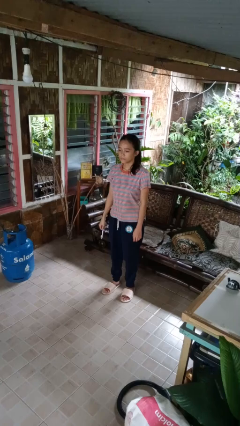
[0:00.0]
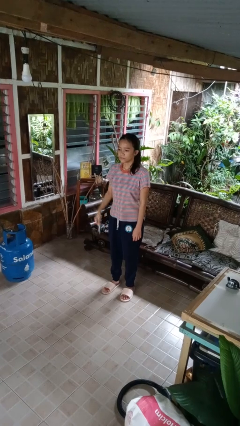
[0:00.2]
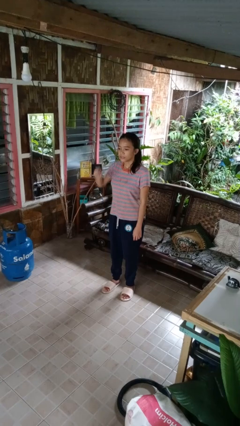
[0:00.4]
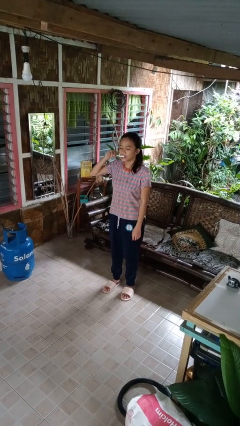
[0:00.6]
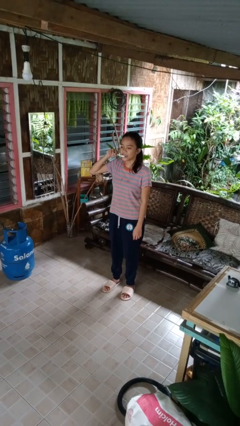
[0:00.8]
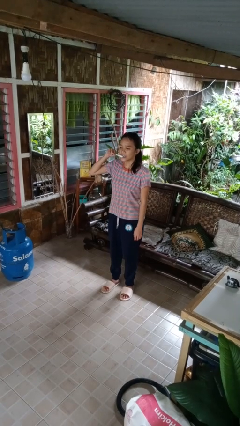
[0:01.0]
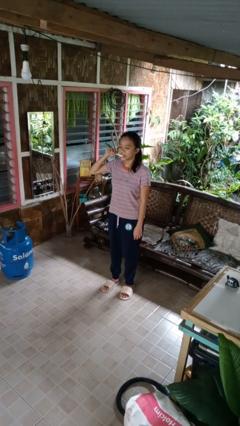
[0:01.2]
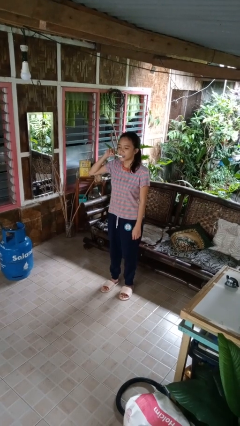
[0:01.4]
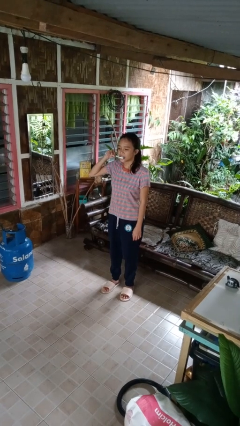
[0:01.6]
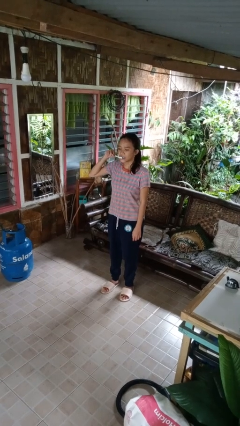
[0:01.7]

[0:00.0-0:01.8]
person brushes teeth

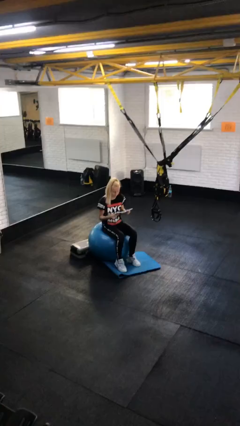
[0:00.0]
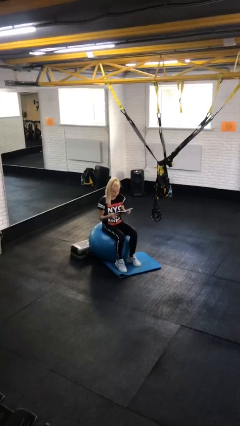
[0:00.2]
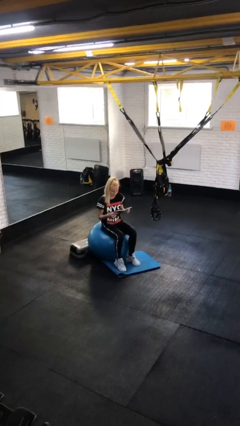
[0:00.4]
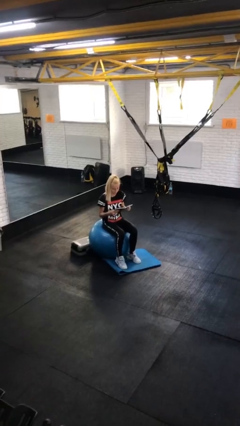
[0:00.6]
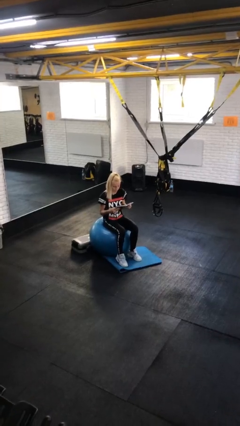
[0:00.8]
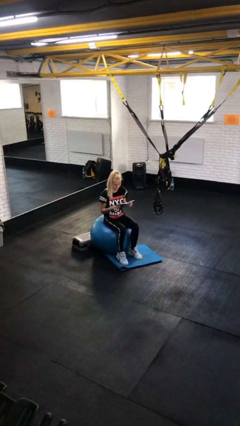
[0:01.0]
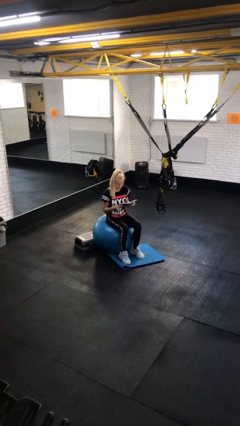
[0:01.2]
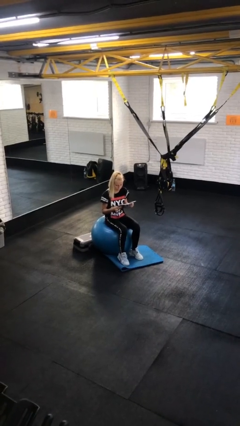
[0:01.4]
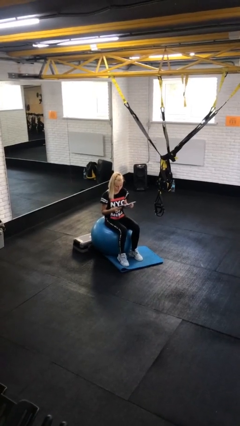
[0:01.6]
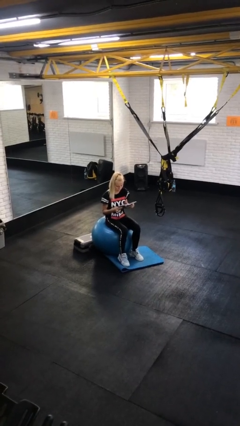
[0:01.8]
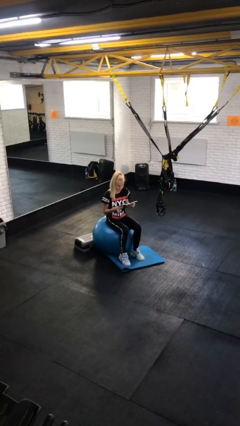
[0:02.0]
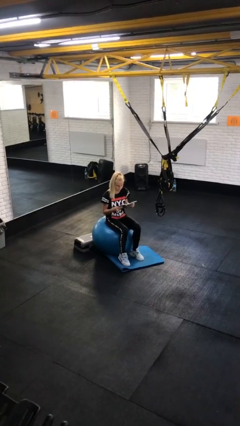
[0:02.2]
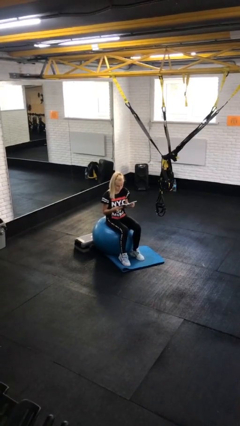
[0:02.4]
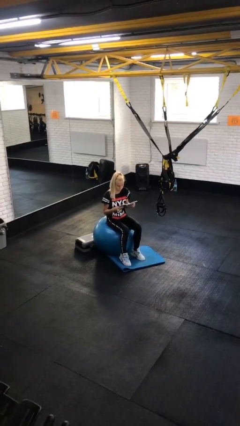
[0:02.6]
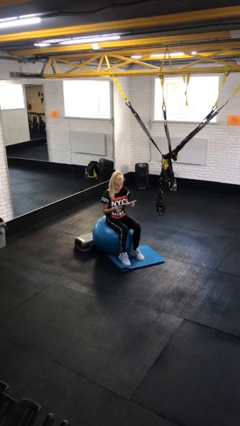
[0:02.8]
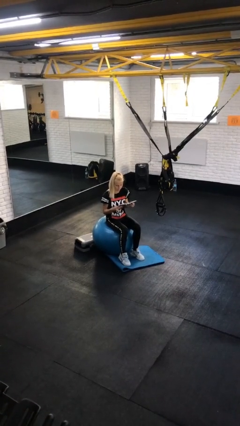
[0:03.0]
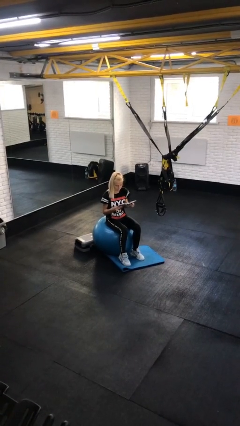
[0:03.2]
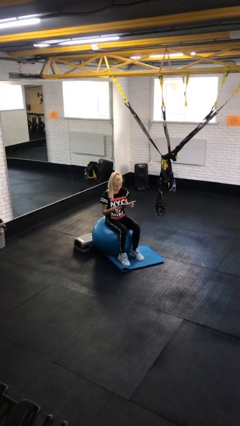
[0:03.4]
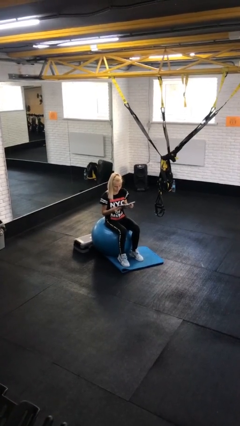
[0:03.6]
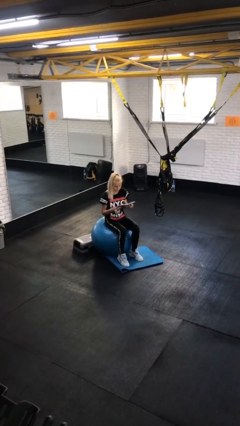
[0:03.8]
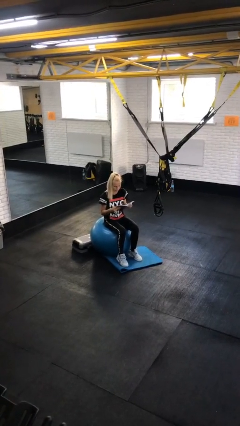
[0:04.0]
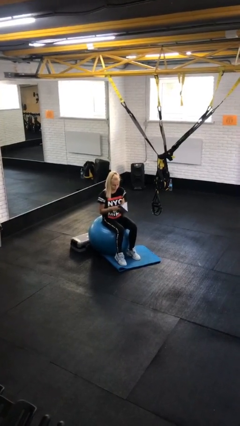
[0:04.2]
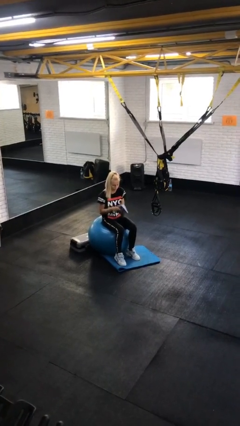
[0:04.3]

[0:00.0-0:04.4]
person reads document

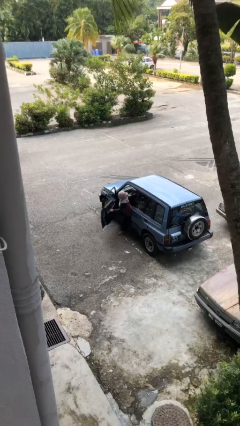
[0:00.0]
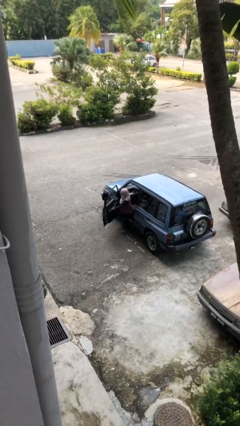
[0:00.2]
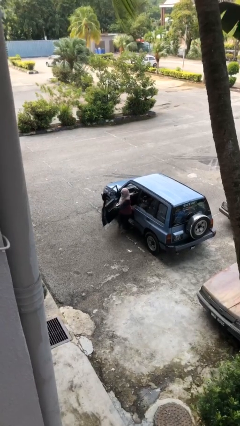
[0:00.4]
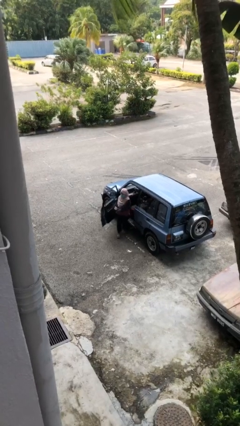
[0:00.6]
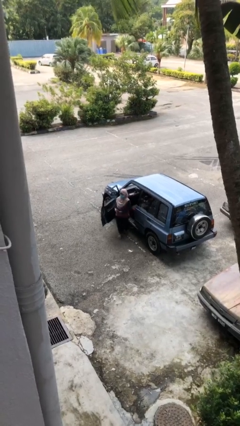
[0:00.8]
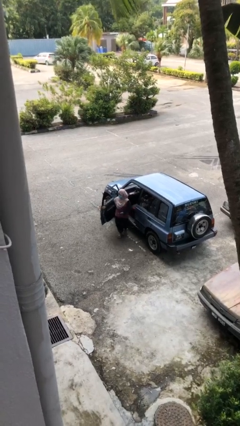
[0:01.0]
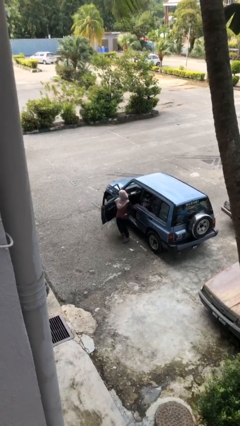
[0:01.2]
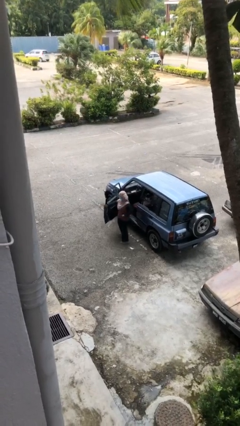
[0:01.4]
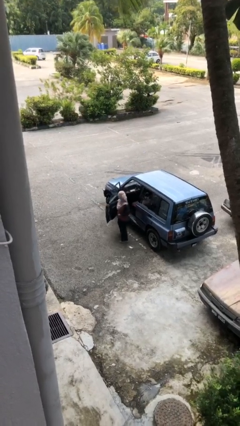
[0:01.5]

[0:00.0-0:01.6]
person exits car

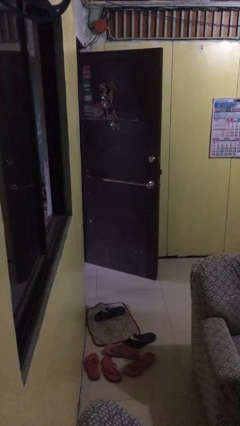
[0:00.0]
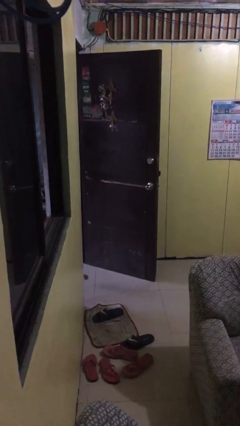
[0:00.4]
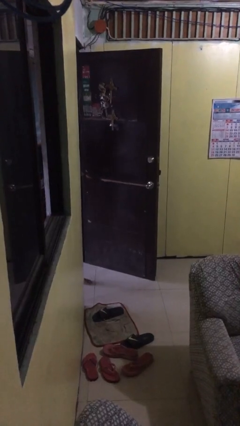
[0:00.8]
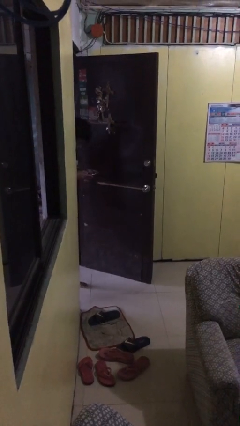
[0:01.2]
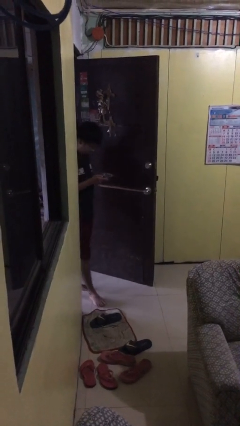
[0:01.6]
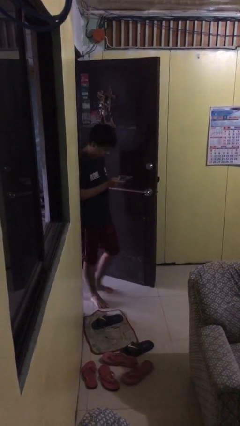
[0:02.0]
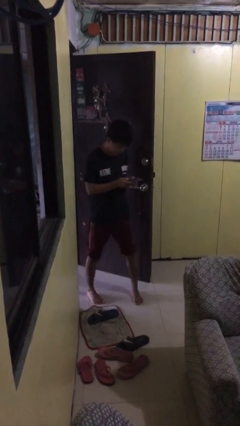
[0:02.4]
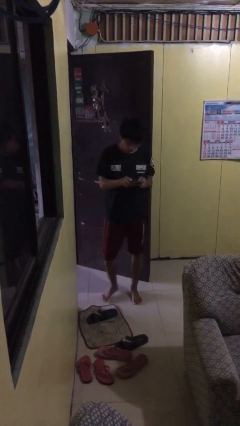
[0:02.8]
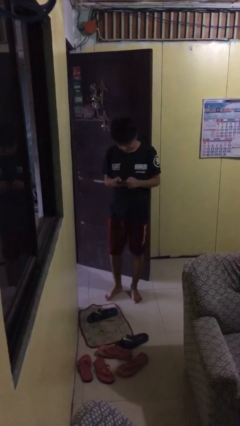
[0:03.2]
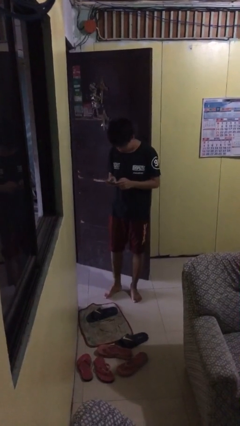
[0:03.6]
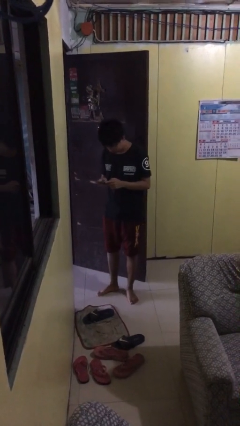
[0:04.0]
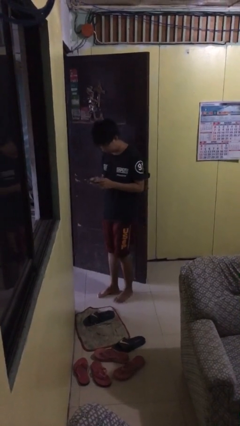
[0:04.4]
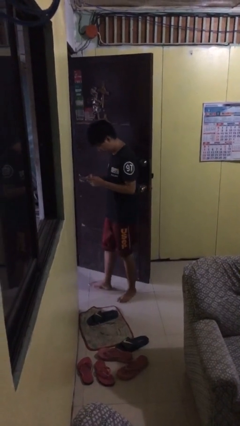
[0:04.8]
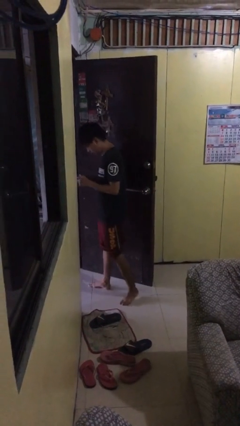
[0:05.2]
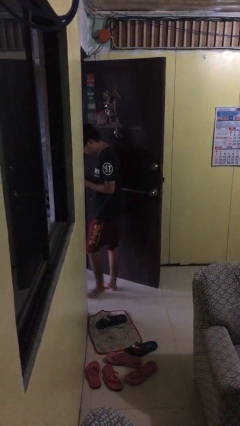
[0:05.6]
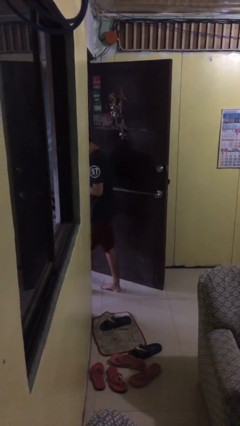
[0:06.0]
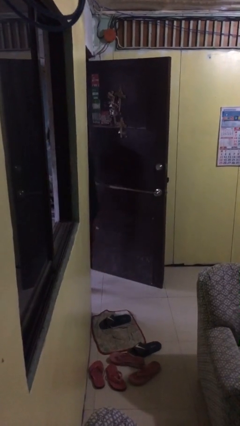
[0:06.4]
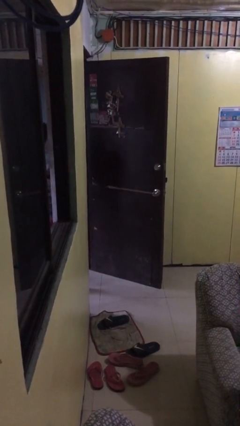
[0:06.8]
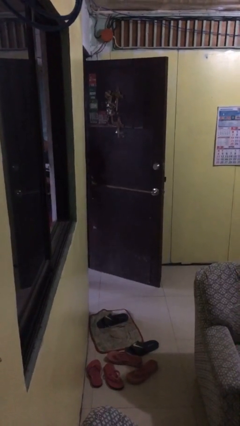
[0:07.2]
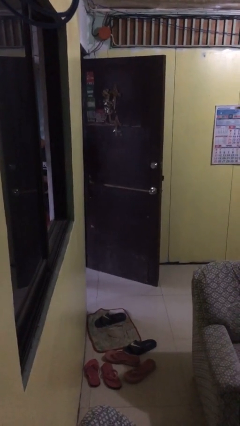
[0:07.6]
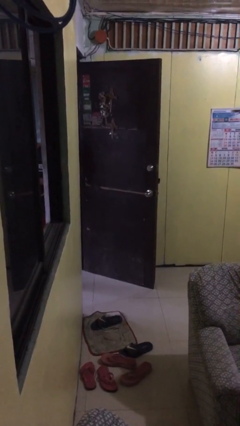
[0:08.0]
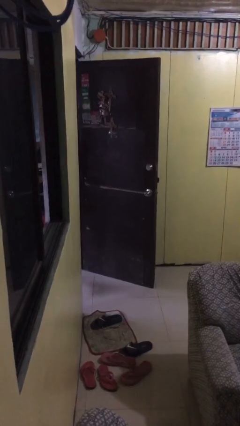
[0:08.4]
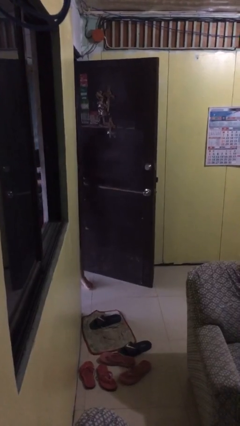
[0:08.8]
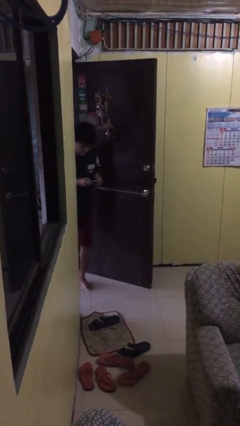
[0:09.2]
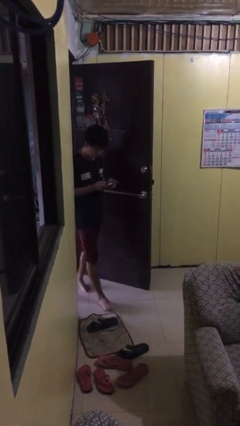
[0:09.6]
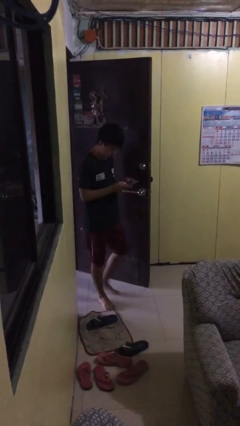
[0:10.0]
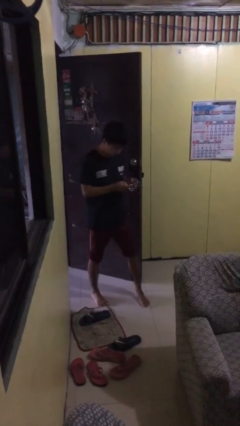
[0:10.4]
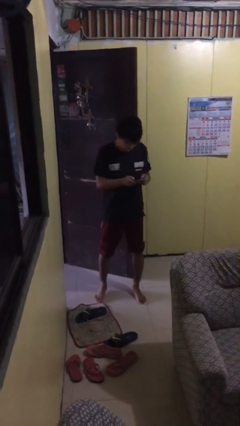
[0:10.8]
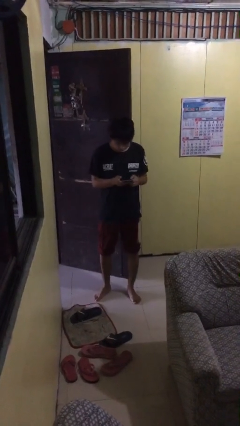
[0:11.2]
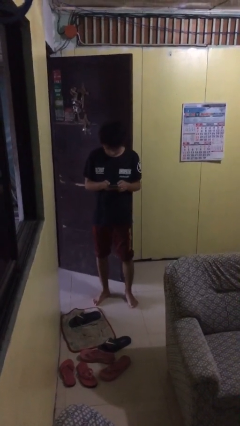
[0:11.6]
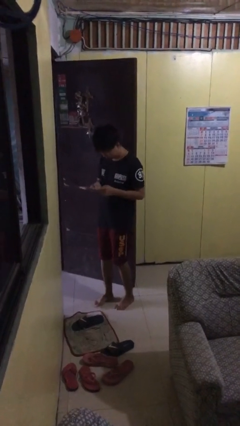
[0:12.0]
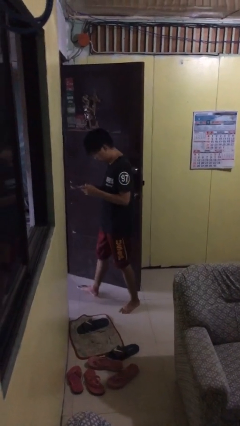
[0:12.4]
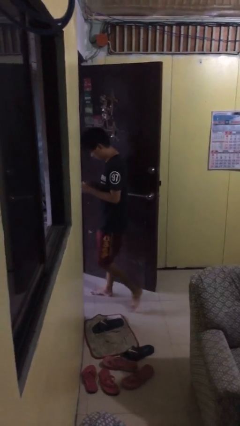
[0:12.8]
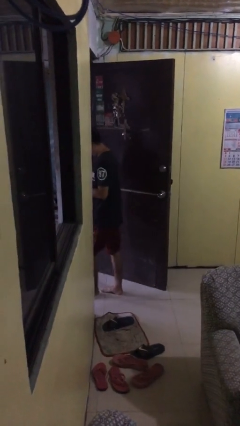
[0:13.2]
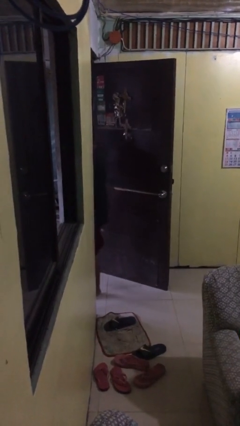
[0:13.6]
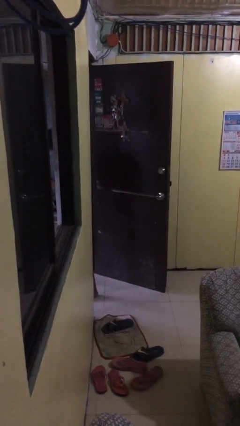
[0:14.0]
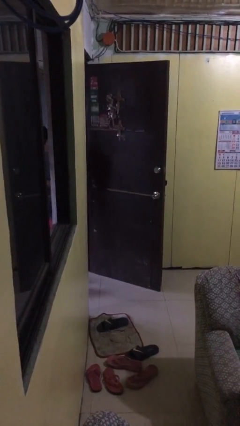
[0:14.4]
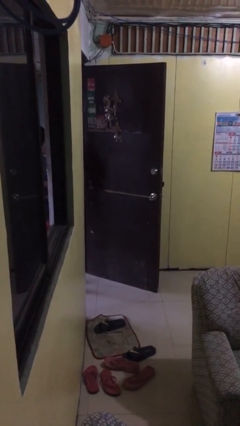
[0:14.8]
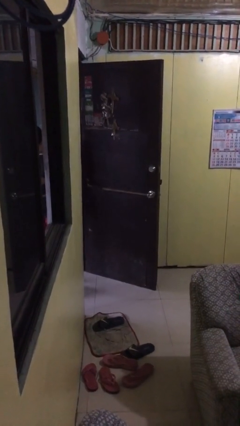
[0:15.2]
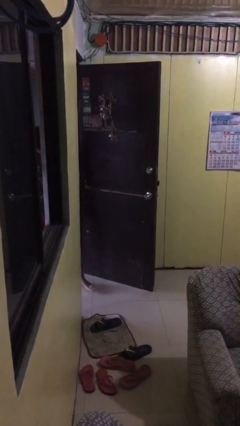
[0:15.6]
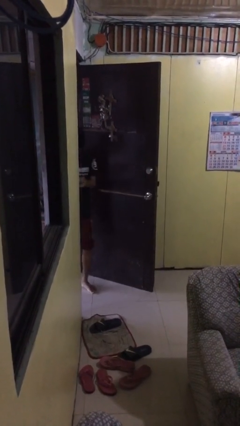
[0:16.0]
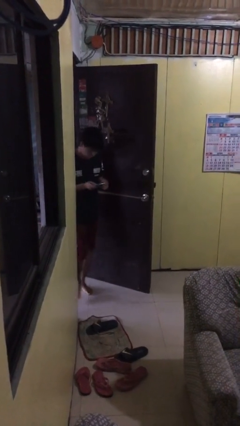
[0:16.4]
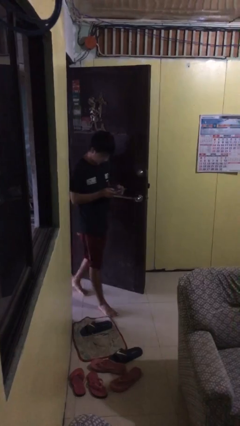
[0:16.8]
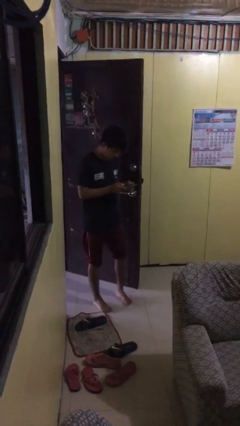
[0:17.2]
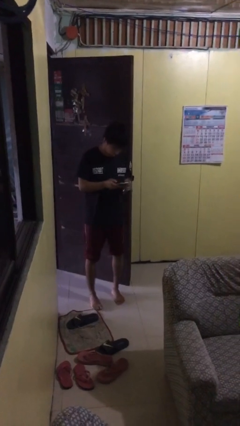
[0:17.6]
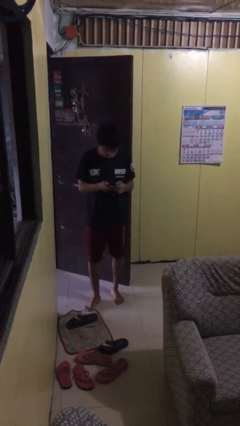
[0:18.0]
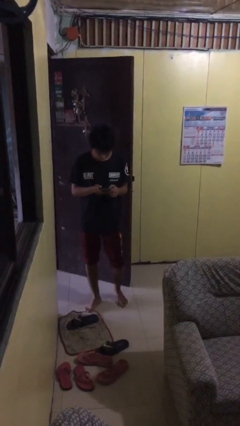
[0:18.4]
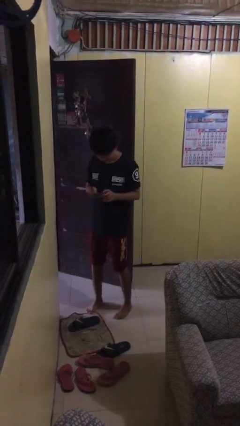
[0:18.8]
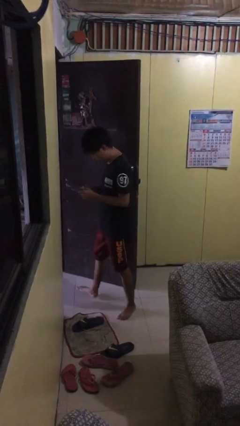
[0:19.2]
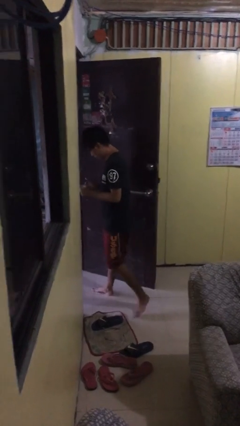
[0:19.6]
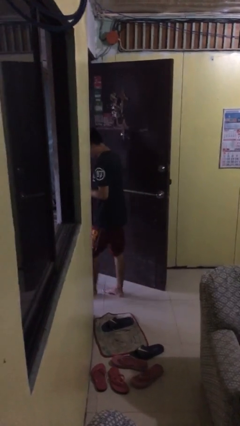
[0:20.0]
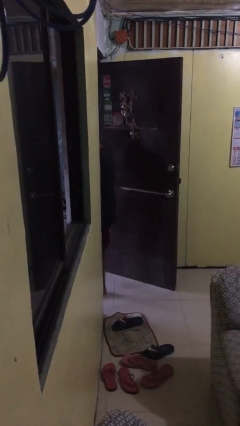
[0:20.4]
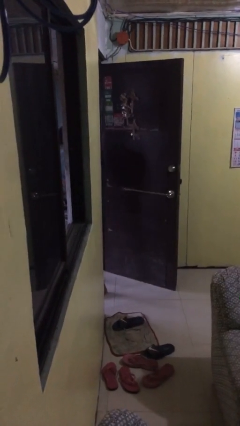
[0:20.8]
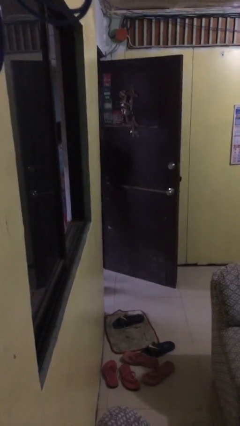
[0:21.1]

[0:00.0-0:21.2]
person texts on phone
